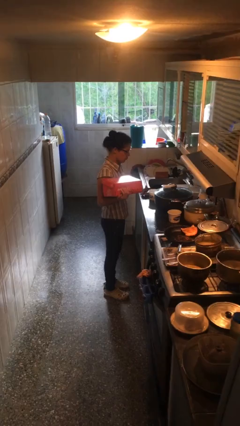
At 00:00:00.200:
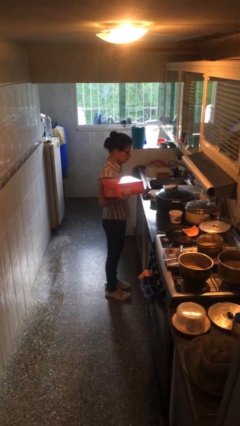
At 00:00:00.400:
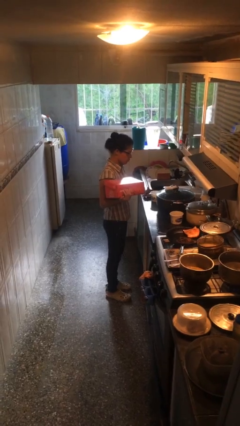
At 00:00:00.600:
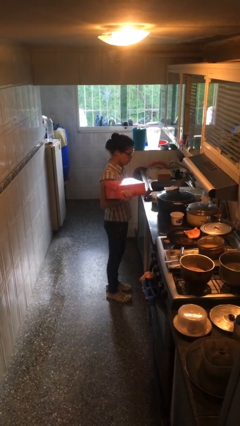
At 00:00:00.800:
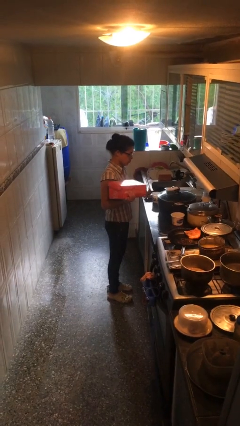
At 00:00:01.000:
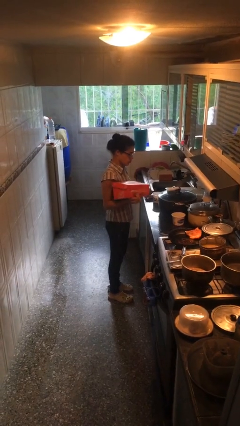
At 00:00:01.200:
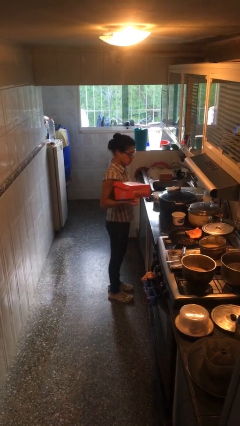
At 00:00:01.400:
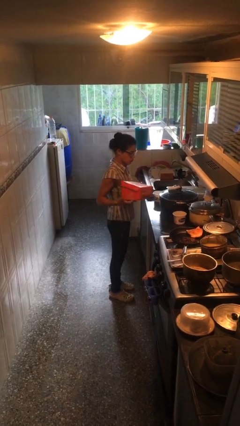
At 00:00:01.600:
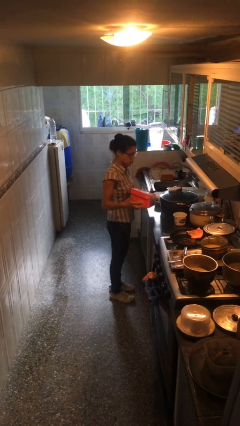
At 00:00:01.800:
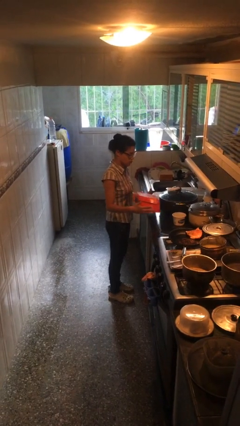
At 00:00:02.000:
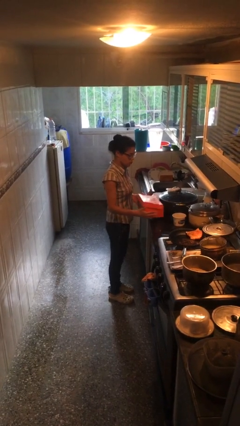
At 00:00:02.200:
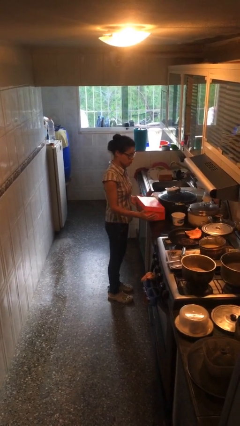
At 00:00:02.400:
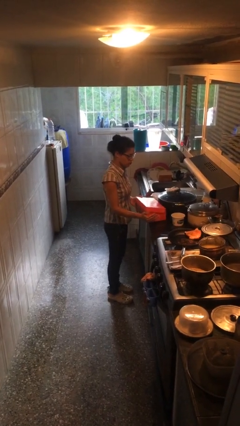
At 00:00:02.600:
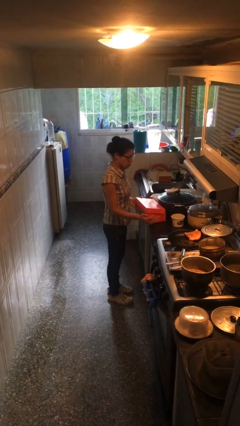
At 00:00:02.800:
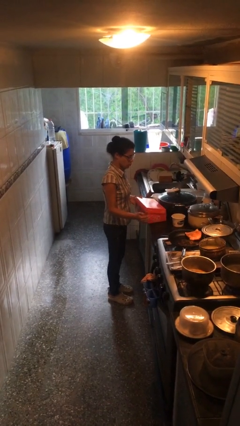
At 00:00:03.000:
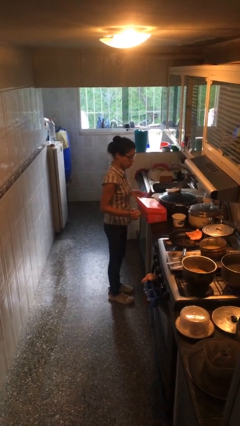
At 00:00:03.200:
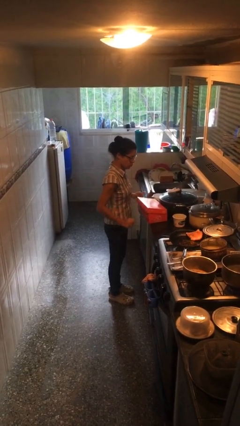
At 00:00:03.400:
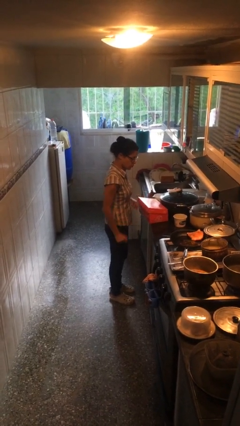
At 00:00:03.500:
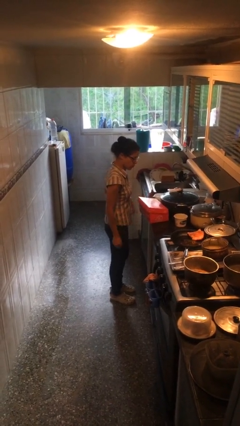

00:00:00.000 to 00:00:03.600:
person puts down object on table

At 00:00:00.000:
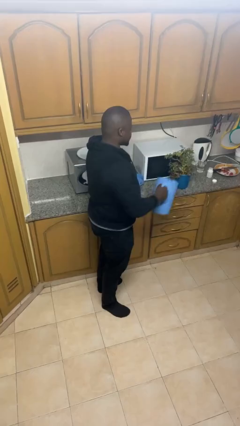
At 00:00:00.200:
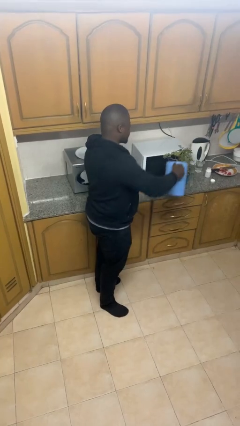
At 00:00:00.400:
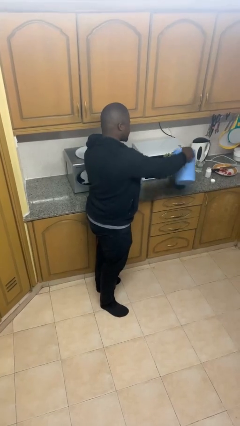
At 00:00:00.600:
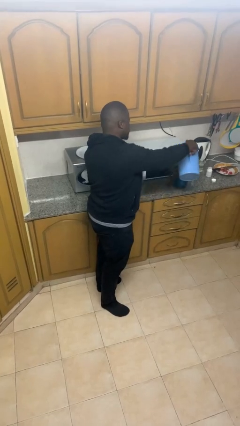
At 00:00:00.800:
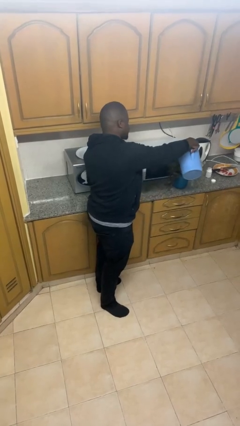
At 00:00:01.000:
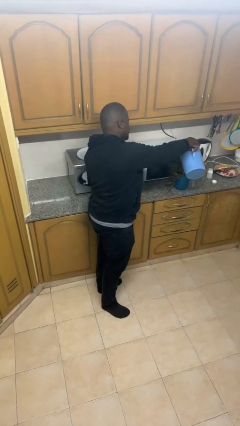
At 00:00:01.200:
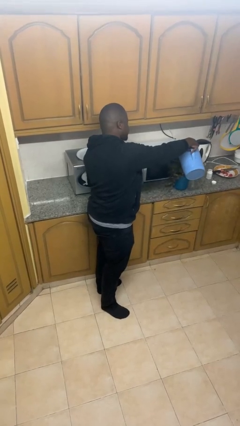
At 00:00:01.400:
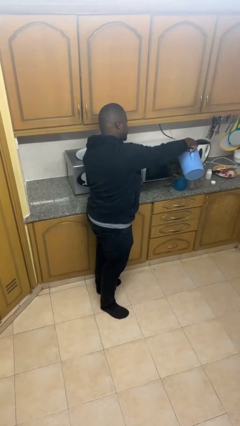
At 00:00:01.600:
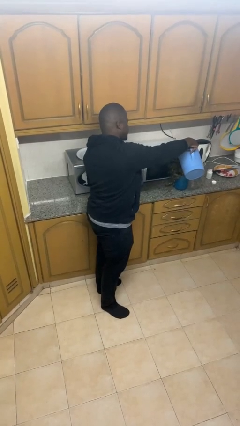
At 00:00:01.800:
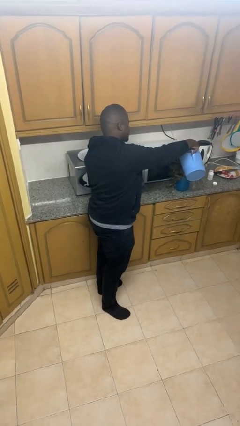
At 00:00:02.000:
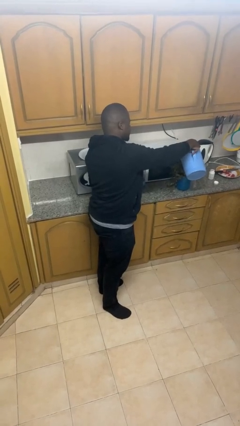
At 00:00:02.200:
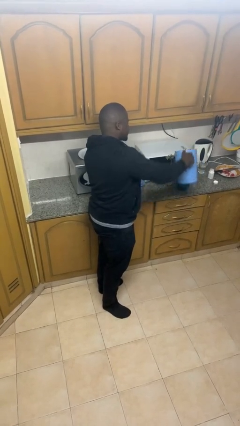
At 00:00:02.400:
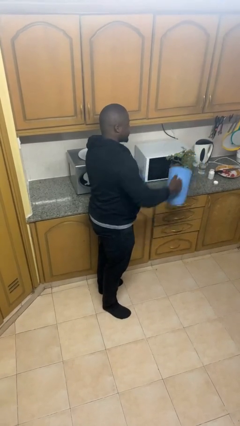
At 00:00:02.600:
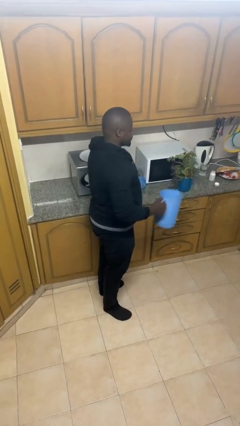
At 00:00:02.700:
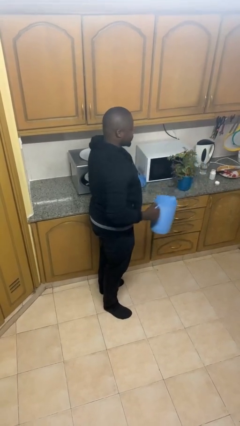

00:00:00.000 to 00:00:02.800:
person waters houseplant

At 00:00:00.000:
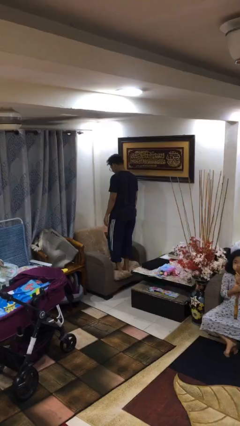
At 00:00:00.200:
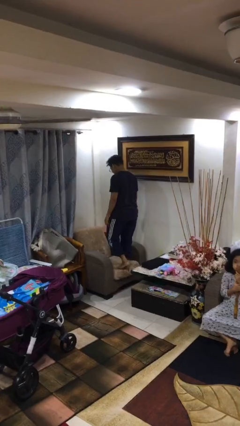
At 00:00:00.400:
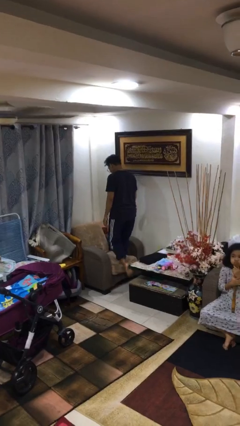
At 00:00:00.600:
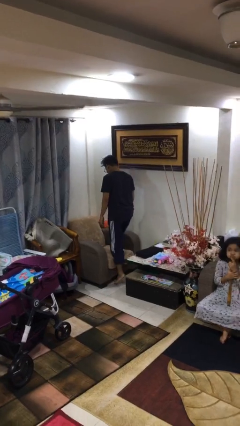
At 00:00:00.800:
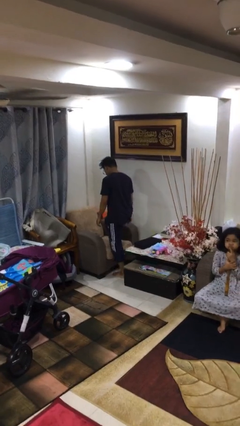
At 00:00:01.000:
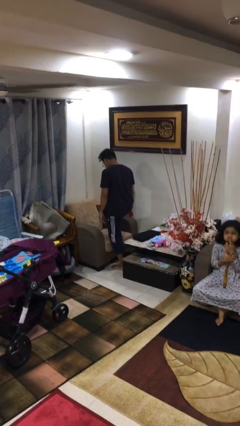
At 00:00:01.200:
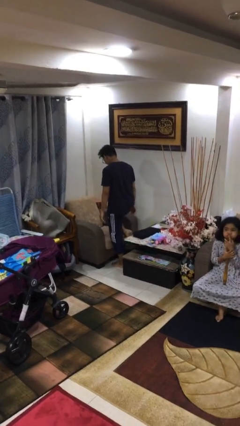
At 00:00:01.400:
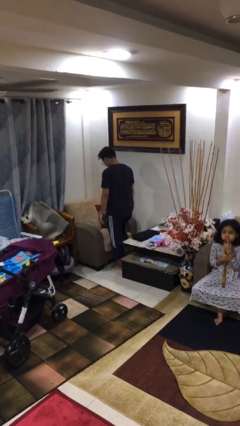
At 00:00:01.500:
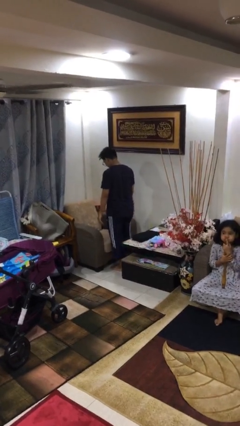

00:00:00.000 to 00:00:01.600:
person climbs off couch

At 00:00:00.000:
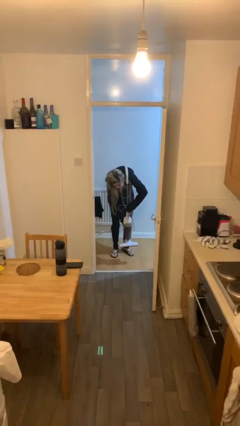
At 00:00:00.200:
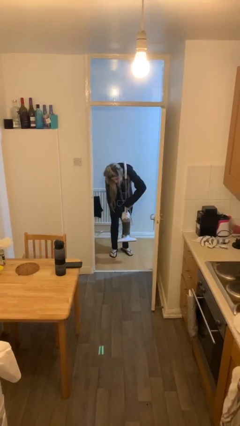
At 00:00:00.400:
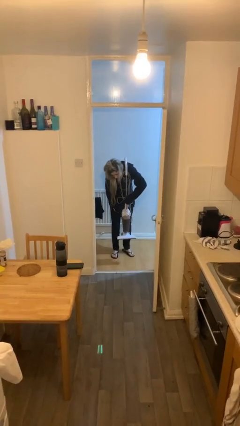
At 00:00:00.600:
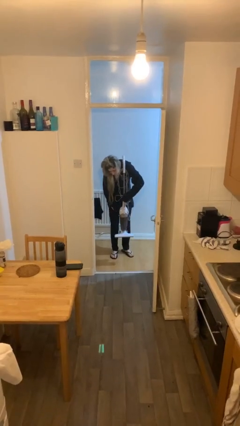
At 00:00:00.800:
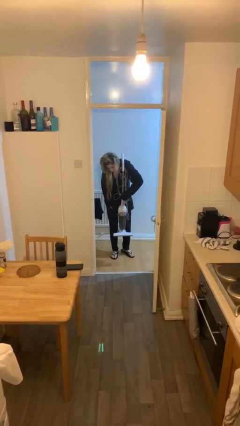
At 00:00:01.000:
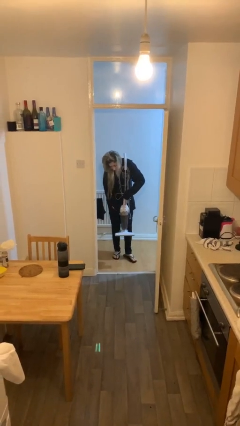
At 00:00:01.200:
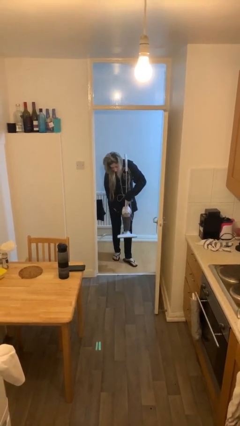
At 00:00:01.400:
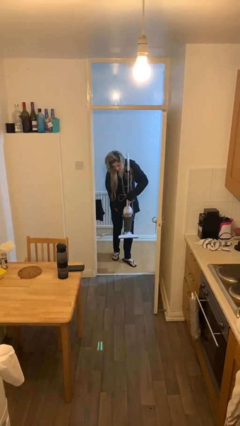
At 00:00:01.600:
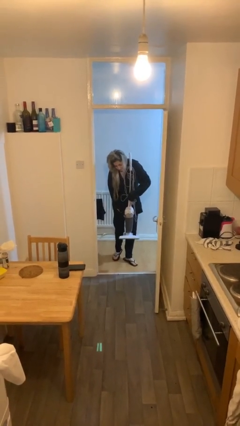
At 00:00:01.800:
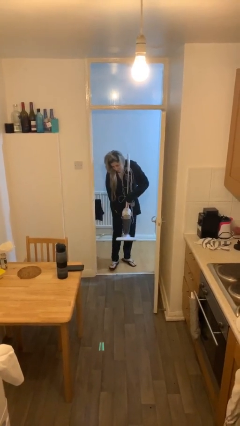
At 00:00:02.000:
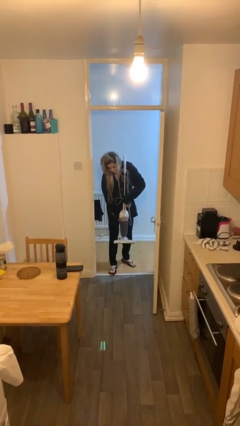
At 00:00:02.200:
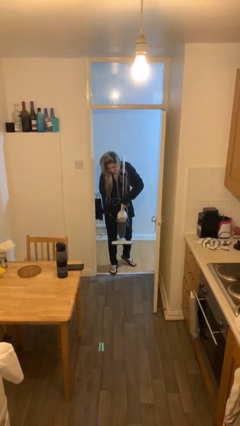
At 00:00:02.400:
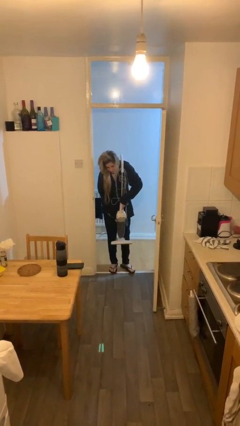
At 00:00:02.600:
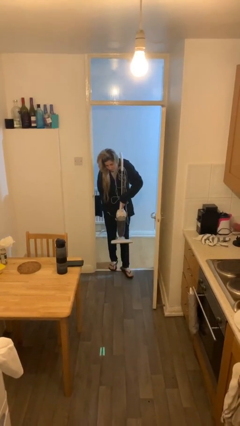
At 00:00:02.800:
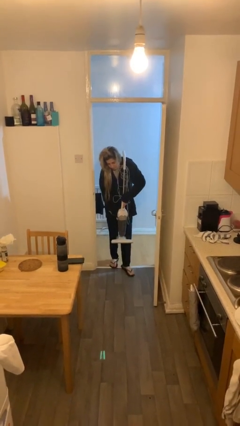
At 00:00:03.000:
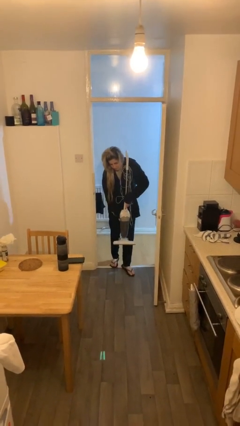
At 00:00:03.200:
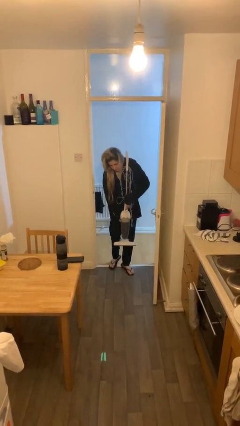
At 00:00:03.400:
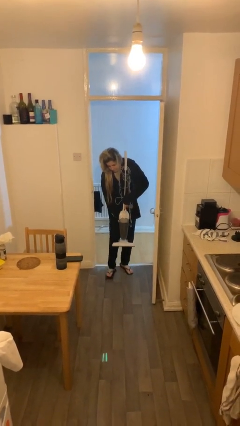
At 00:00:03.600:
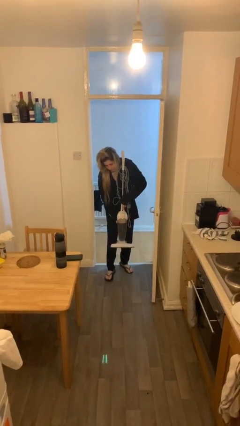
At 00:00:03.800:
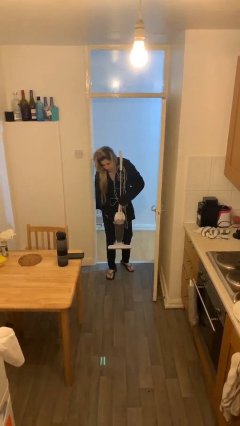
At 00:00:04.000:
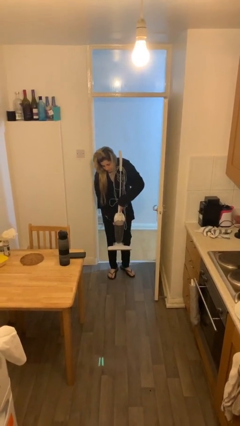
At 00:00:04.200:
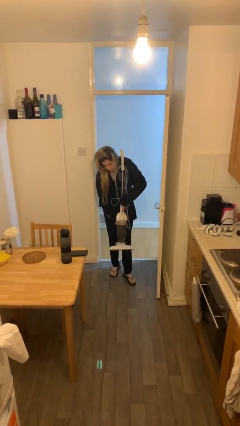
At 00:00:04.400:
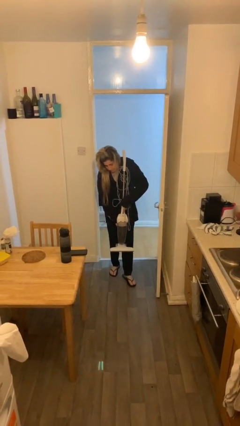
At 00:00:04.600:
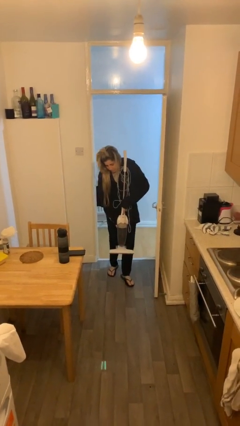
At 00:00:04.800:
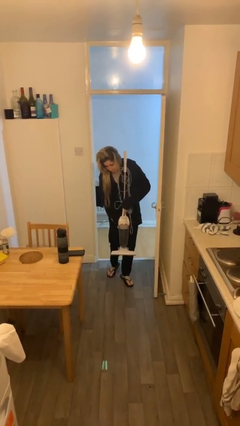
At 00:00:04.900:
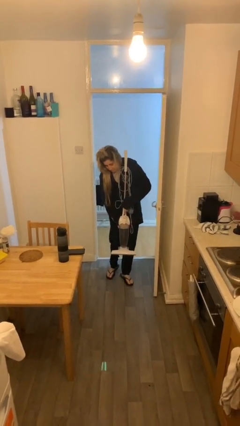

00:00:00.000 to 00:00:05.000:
person carries heavy object

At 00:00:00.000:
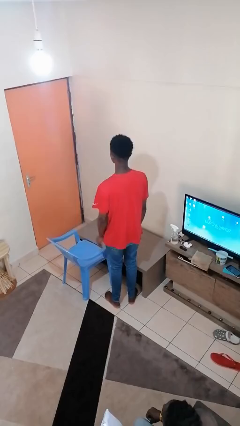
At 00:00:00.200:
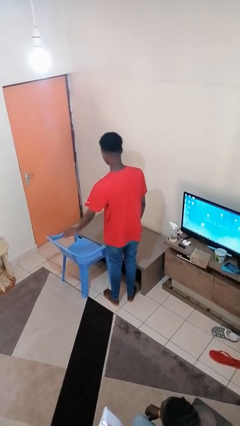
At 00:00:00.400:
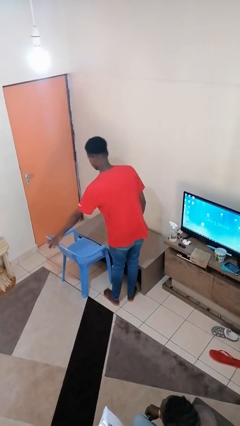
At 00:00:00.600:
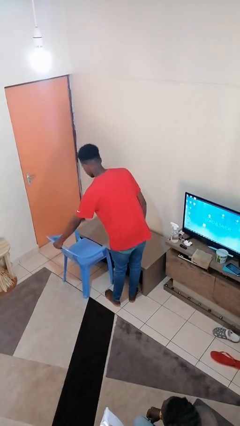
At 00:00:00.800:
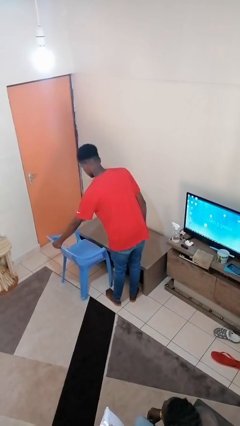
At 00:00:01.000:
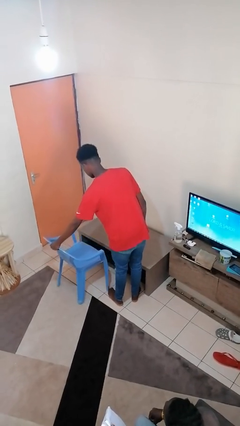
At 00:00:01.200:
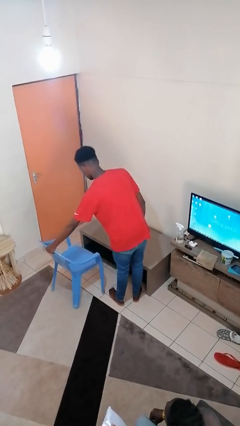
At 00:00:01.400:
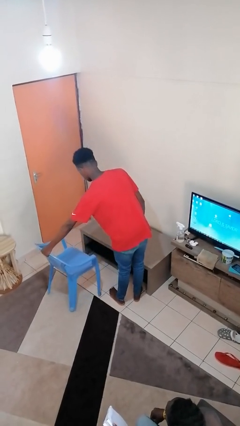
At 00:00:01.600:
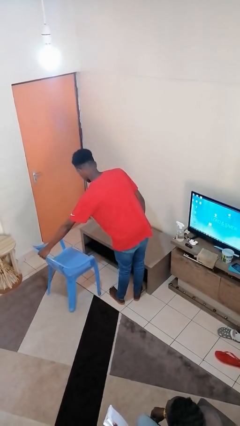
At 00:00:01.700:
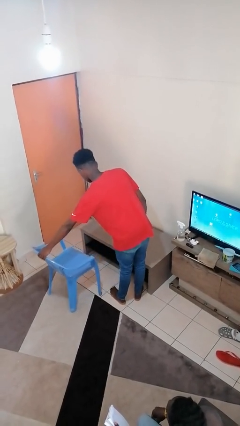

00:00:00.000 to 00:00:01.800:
person pulls out chair

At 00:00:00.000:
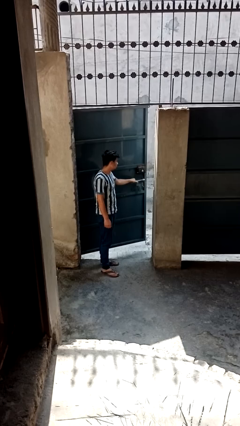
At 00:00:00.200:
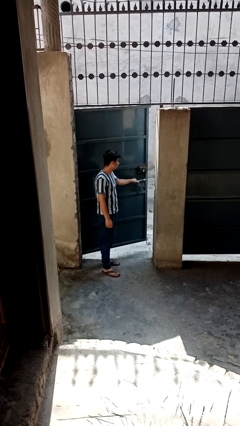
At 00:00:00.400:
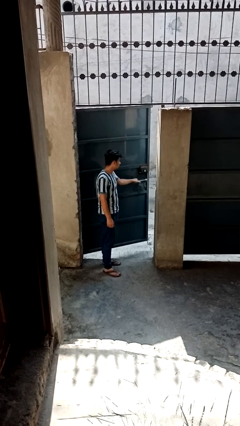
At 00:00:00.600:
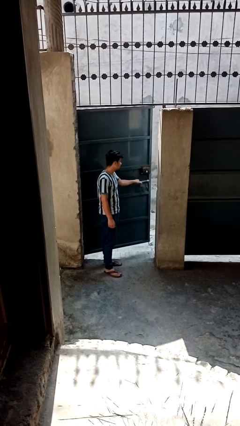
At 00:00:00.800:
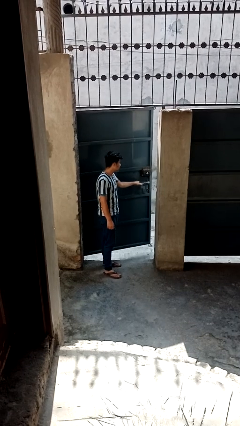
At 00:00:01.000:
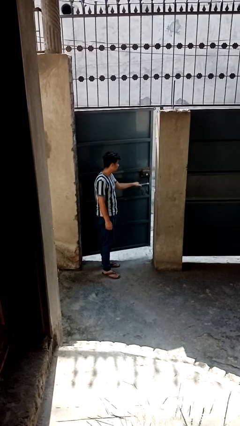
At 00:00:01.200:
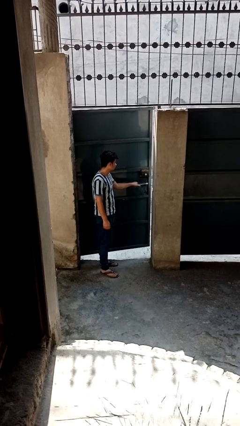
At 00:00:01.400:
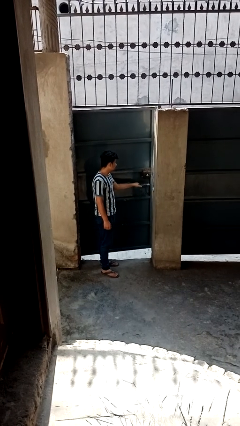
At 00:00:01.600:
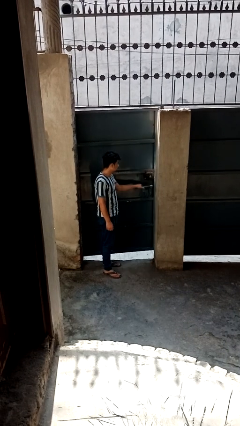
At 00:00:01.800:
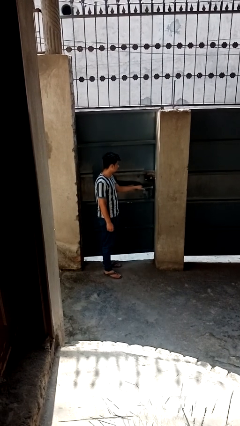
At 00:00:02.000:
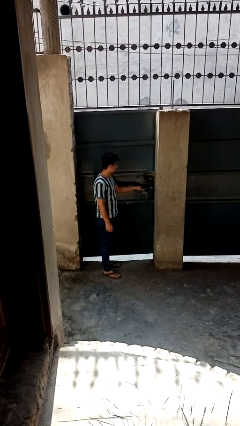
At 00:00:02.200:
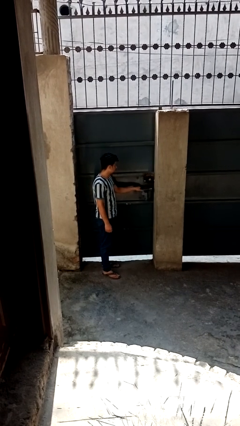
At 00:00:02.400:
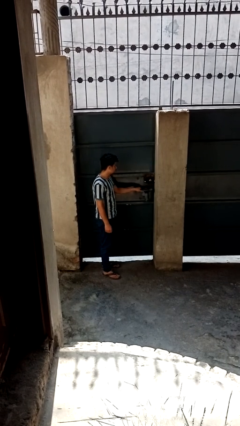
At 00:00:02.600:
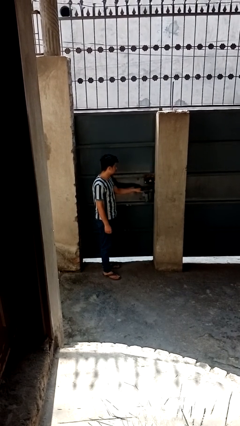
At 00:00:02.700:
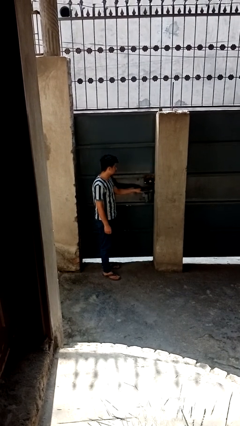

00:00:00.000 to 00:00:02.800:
person closes gate
